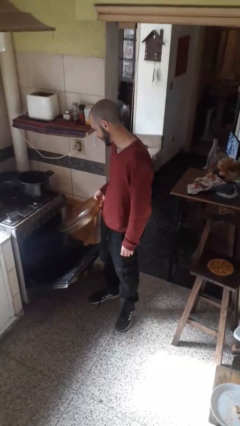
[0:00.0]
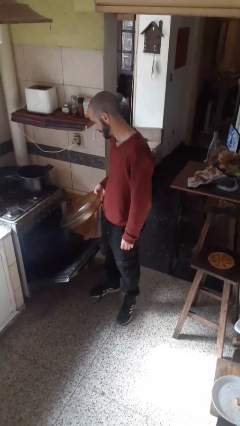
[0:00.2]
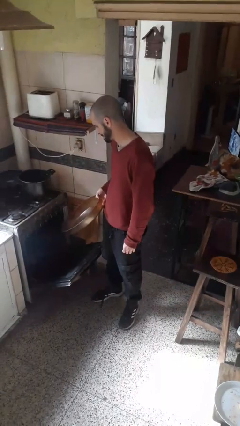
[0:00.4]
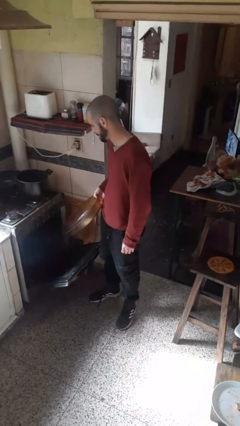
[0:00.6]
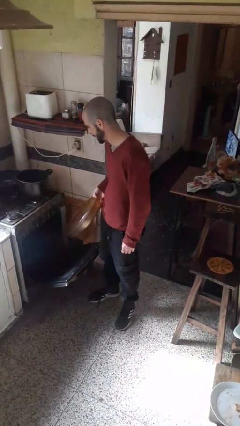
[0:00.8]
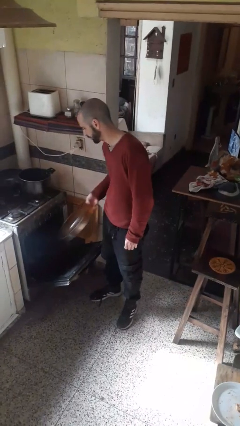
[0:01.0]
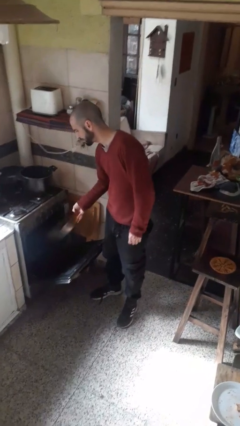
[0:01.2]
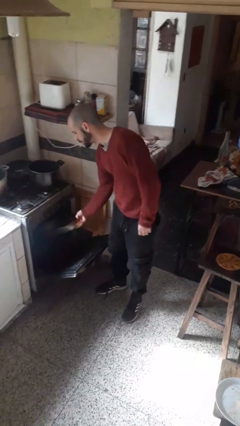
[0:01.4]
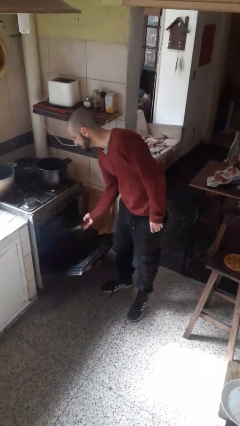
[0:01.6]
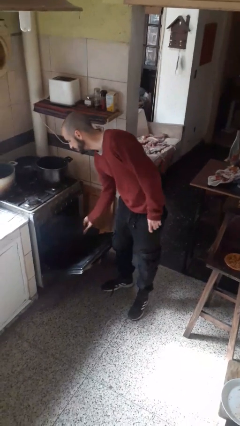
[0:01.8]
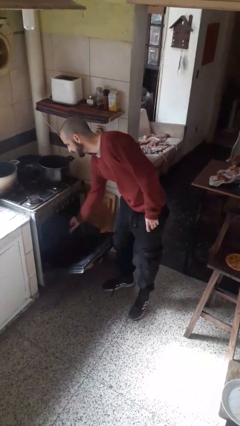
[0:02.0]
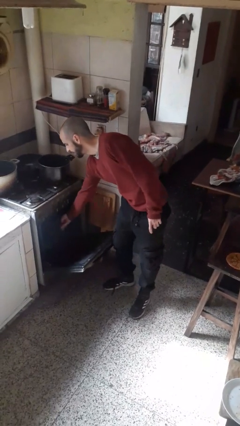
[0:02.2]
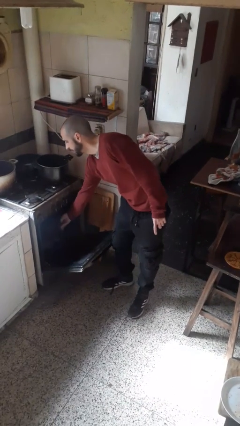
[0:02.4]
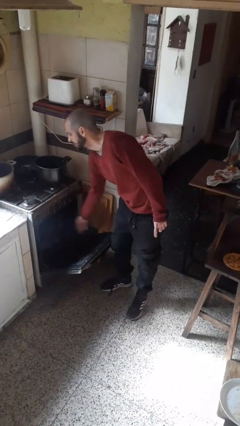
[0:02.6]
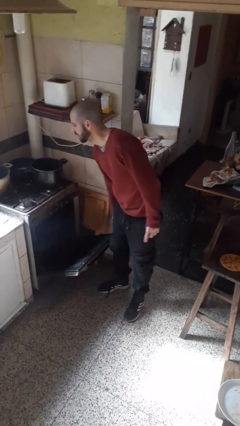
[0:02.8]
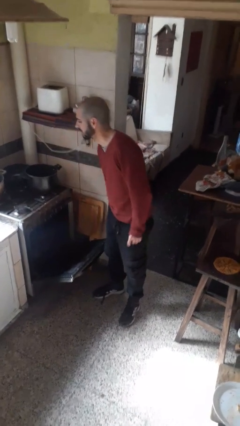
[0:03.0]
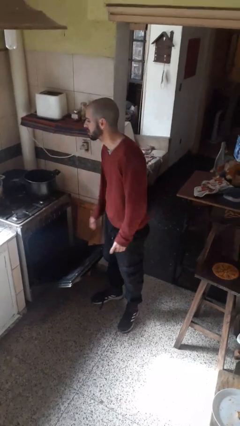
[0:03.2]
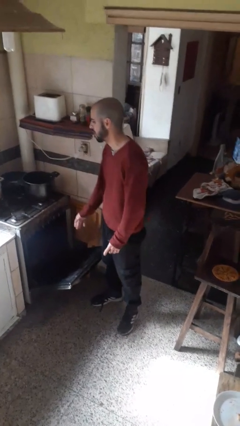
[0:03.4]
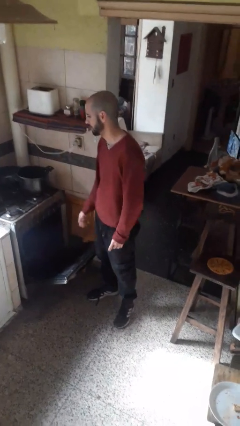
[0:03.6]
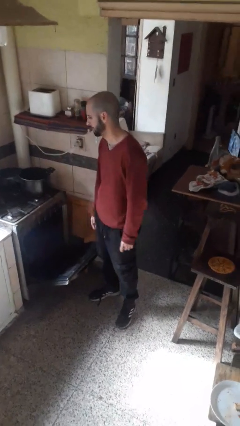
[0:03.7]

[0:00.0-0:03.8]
person puts object into oven

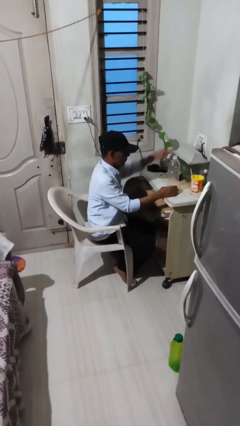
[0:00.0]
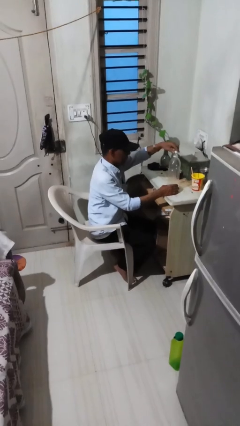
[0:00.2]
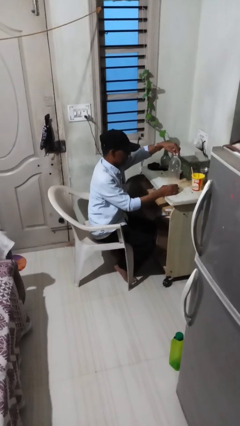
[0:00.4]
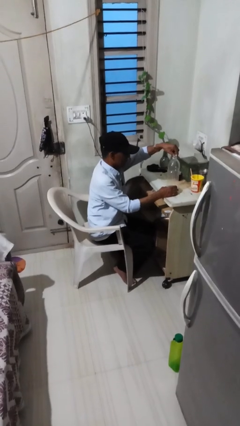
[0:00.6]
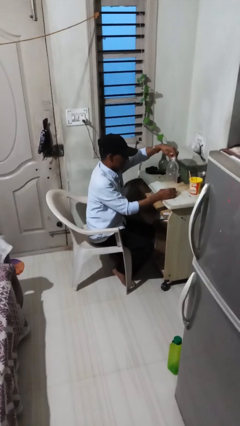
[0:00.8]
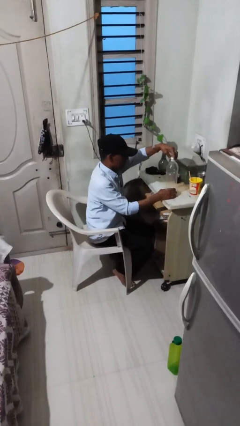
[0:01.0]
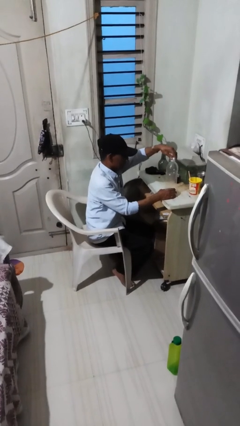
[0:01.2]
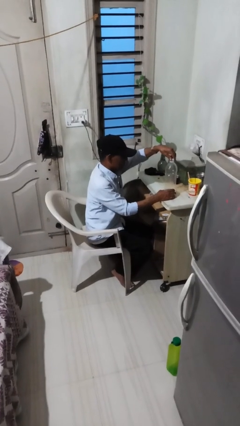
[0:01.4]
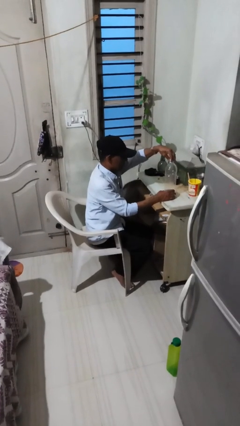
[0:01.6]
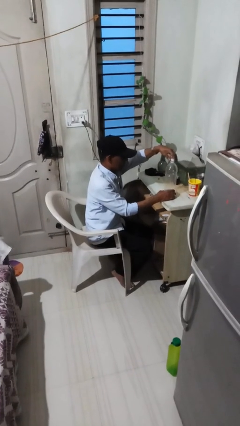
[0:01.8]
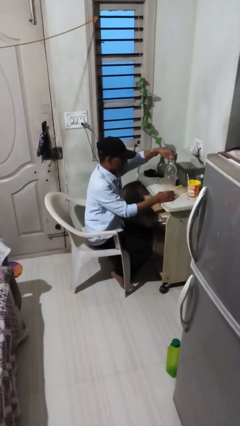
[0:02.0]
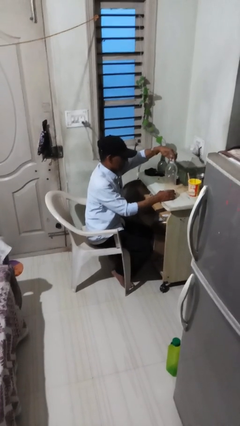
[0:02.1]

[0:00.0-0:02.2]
person screws lid to bottle

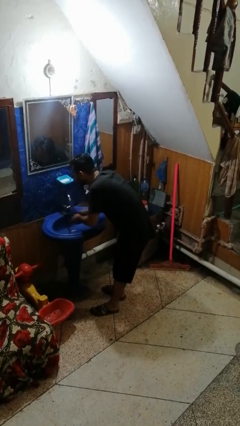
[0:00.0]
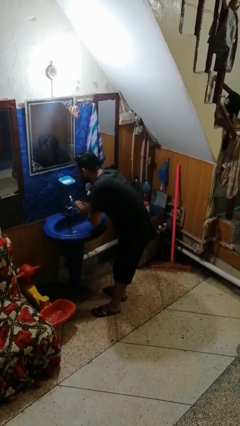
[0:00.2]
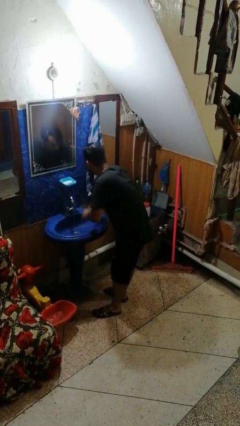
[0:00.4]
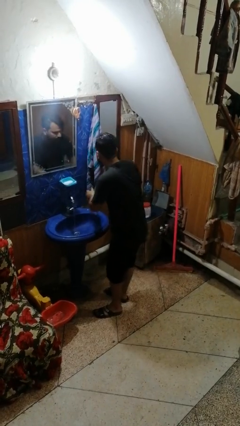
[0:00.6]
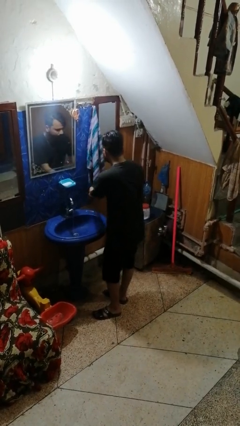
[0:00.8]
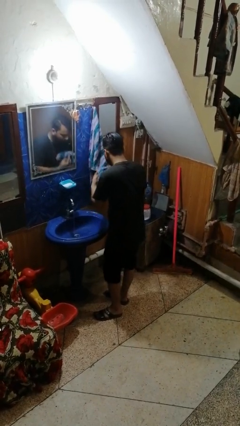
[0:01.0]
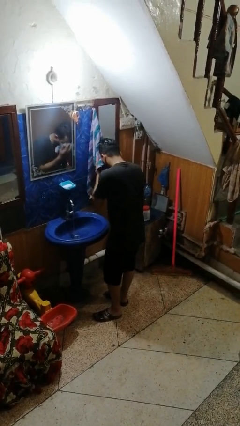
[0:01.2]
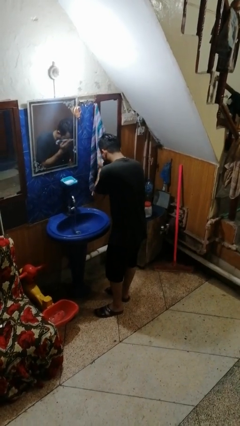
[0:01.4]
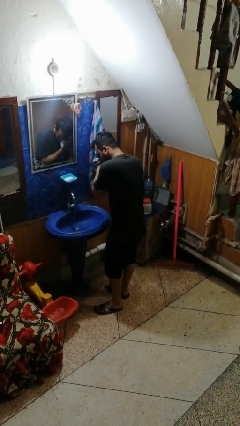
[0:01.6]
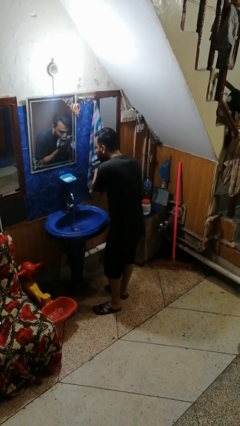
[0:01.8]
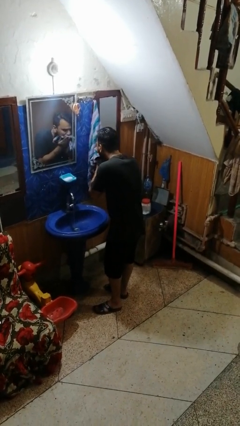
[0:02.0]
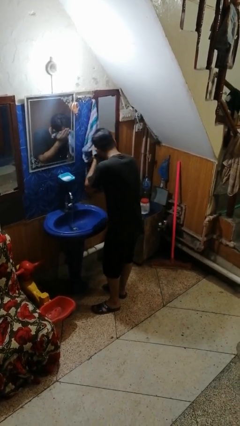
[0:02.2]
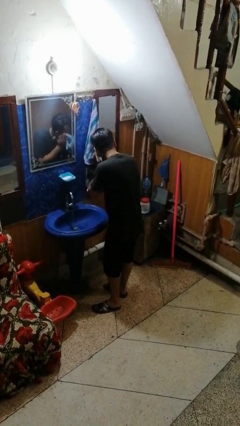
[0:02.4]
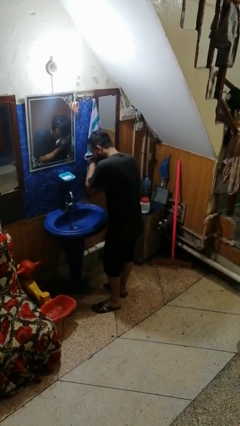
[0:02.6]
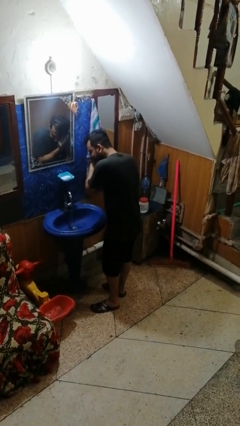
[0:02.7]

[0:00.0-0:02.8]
person dries face with towel

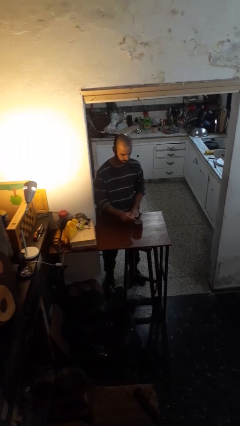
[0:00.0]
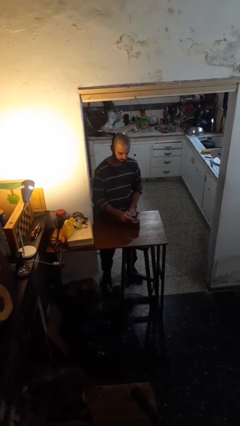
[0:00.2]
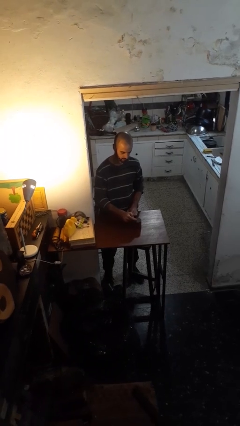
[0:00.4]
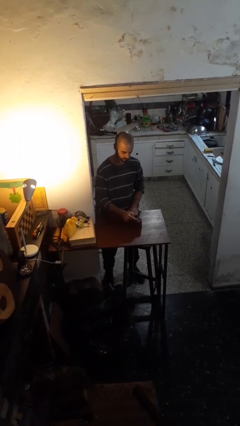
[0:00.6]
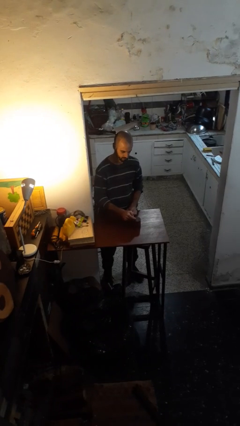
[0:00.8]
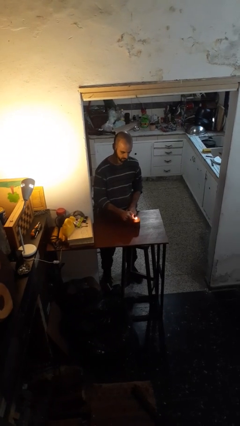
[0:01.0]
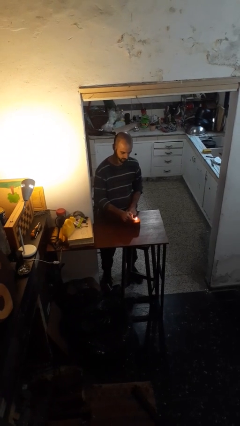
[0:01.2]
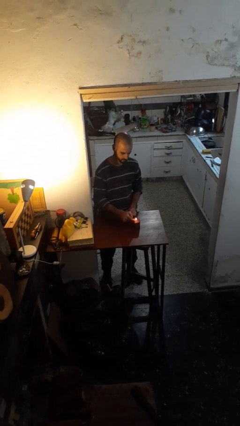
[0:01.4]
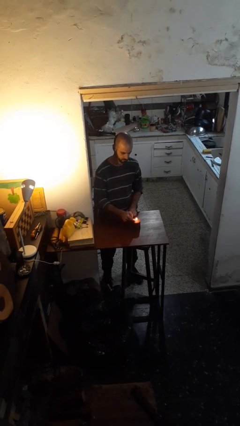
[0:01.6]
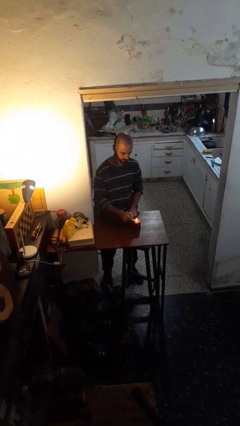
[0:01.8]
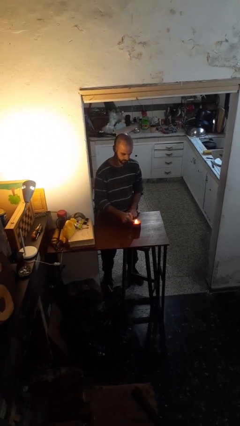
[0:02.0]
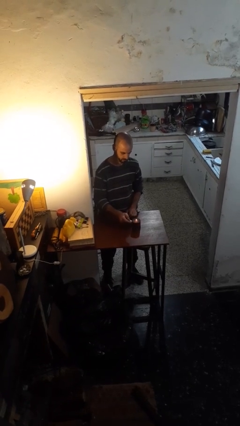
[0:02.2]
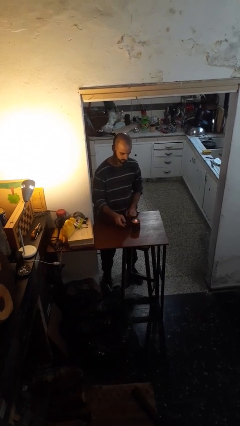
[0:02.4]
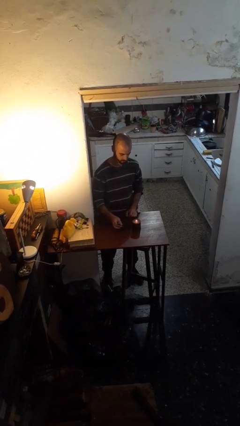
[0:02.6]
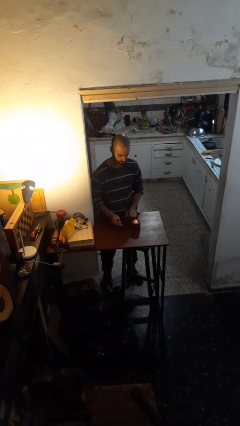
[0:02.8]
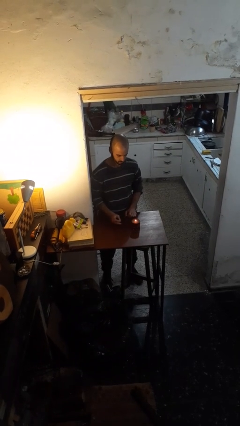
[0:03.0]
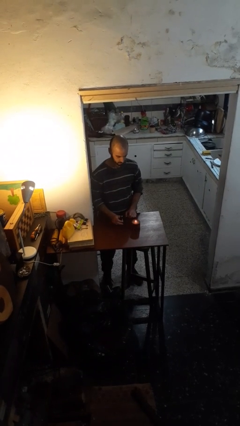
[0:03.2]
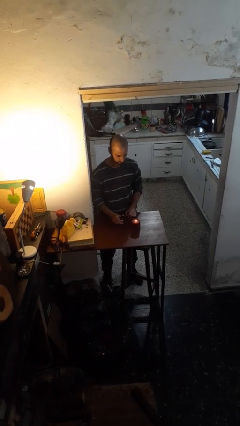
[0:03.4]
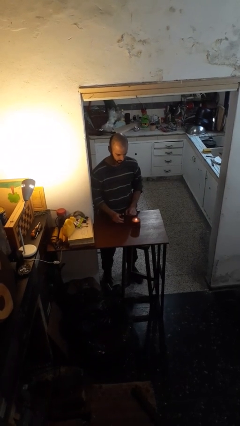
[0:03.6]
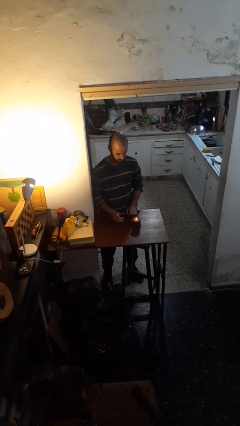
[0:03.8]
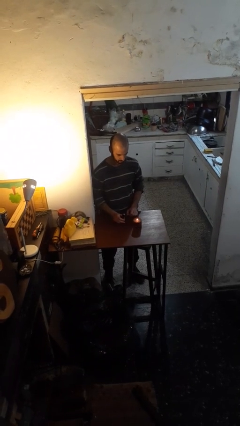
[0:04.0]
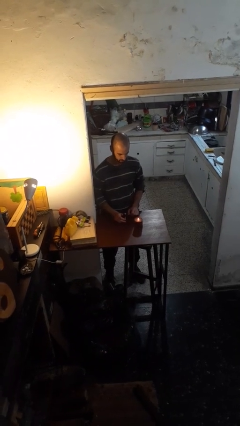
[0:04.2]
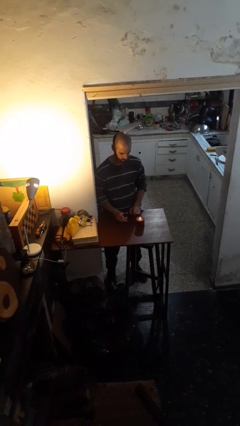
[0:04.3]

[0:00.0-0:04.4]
person lights candle

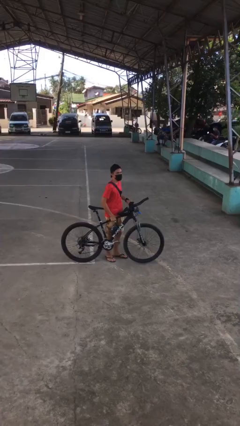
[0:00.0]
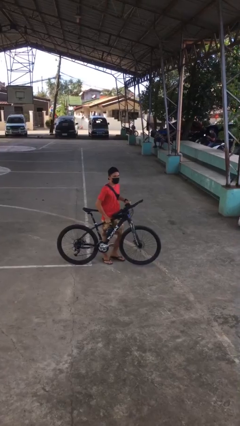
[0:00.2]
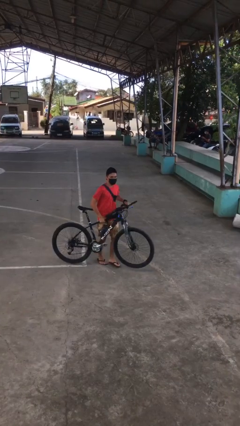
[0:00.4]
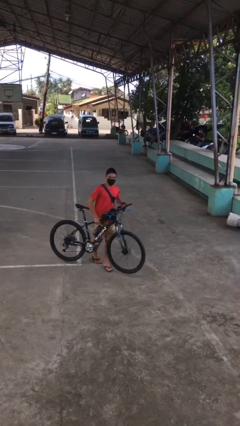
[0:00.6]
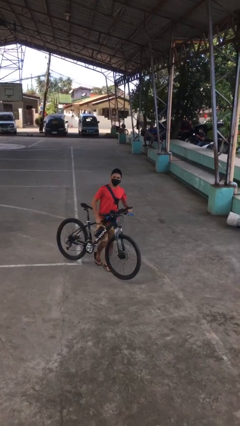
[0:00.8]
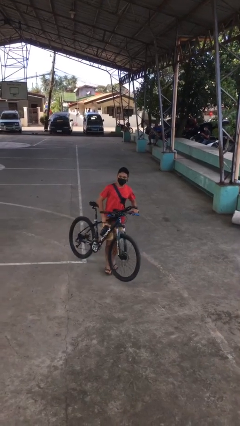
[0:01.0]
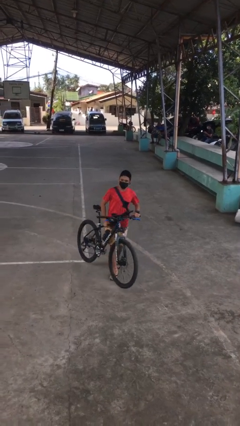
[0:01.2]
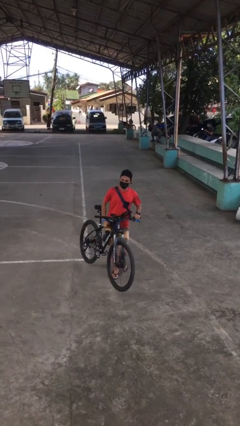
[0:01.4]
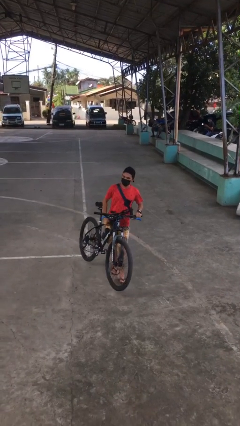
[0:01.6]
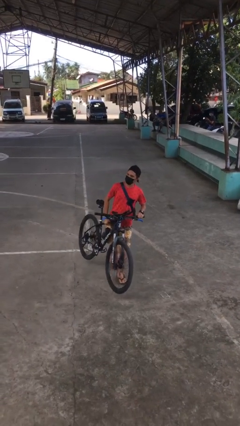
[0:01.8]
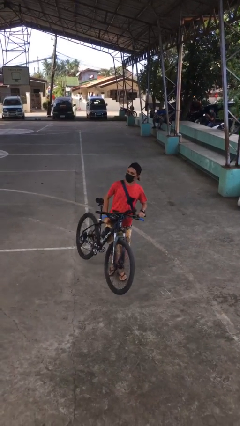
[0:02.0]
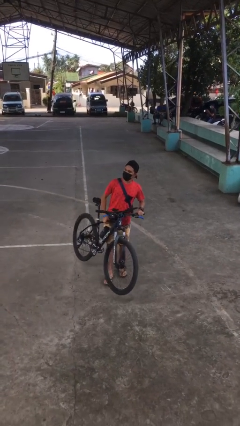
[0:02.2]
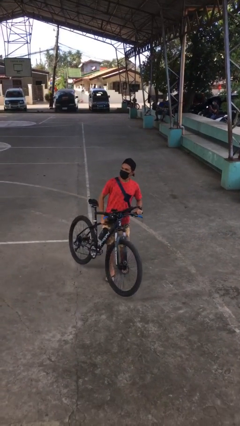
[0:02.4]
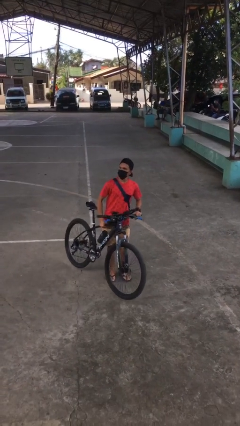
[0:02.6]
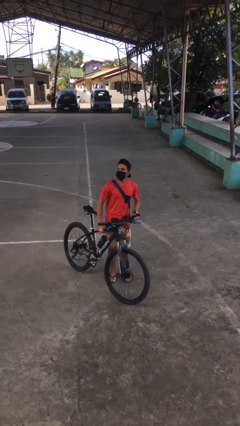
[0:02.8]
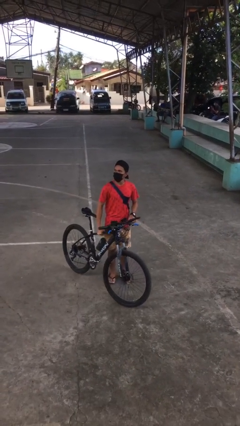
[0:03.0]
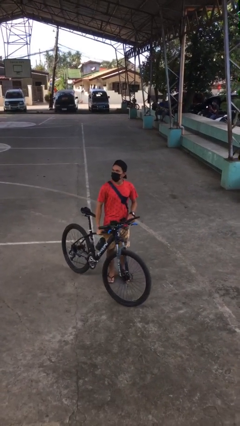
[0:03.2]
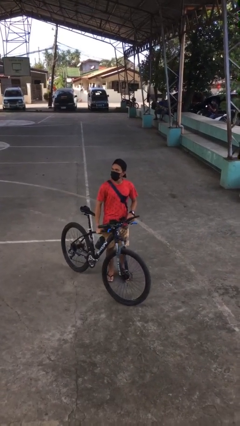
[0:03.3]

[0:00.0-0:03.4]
person carries bicycle

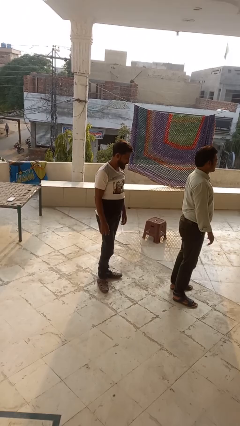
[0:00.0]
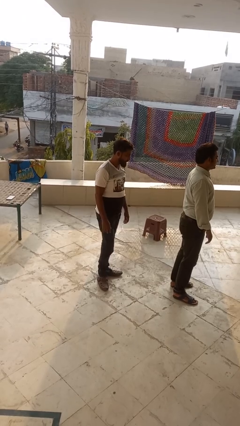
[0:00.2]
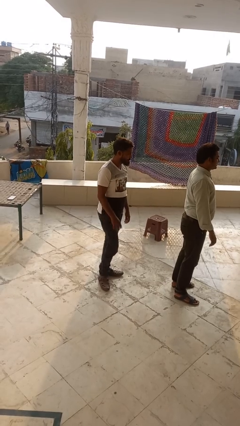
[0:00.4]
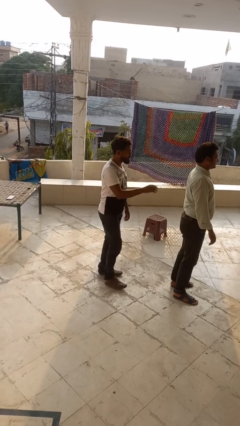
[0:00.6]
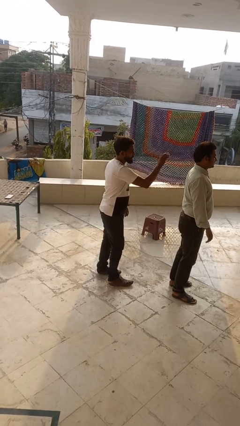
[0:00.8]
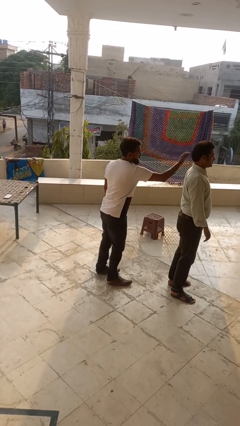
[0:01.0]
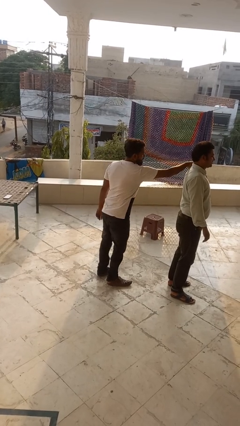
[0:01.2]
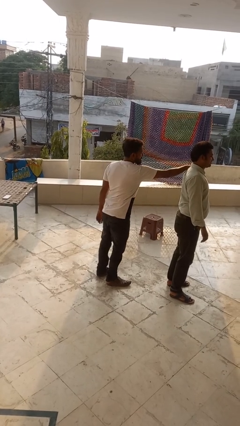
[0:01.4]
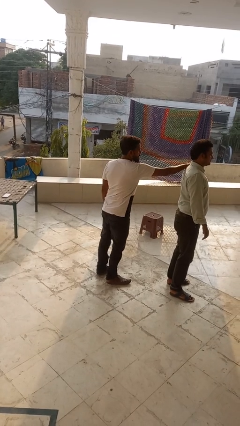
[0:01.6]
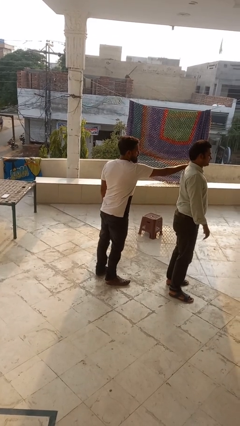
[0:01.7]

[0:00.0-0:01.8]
person grabs person by shoulder
